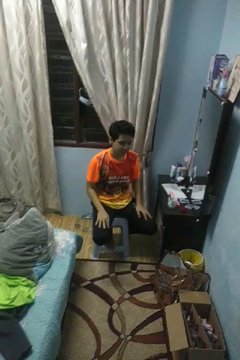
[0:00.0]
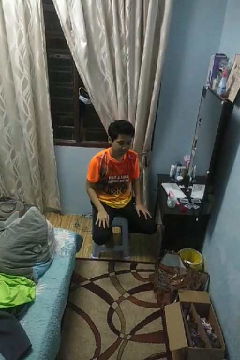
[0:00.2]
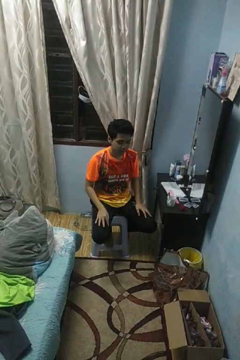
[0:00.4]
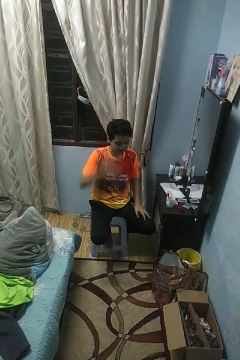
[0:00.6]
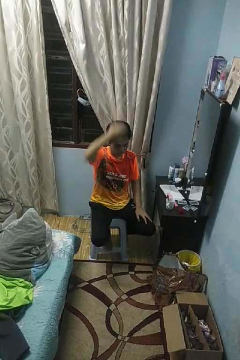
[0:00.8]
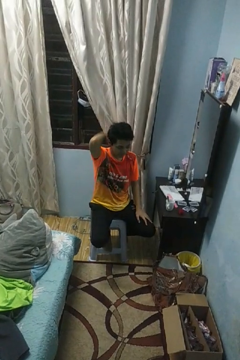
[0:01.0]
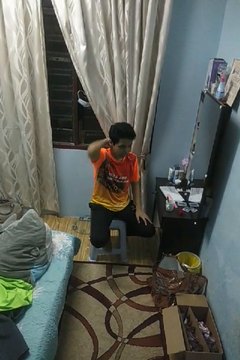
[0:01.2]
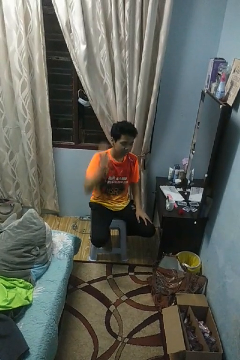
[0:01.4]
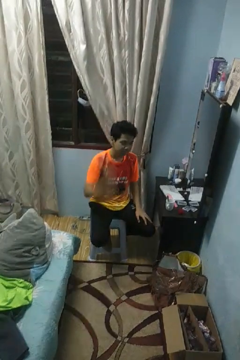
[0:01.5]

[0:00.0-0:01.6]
person strokes hair

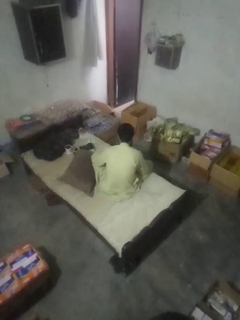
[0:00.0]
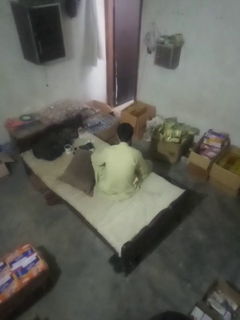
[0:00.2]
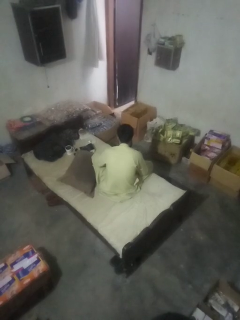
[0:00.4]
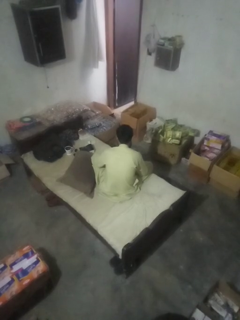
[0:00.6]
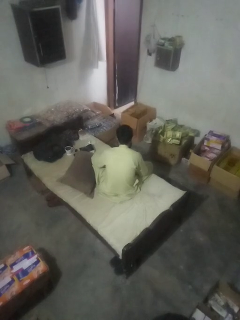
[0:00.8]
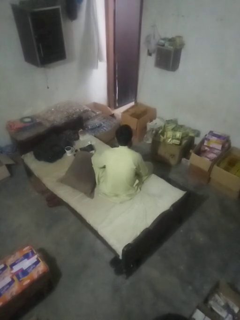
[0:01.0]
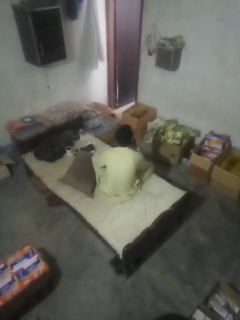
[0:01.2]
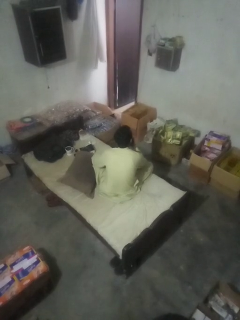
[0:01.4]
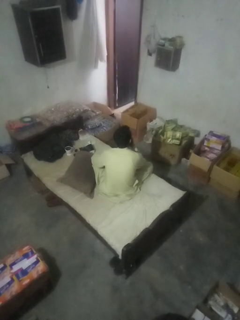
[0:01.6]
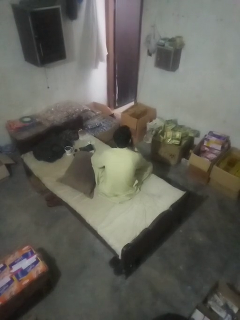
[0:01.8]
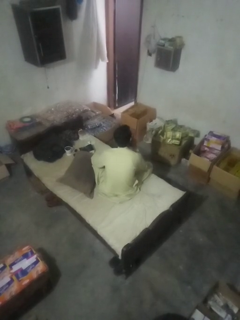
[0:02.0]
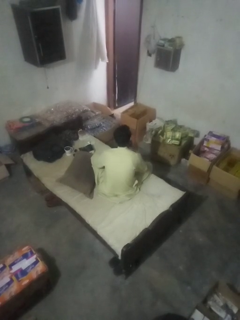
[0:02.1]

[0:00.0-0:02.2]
person gestures be quiet

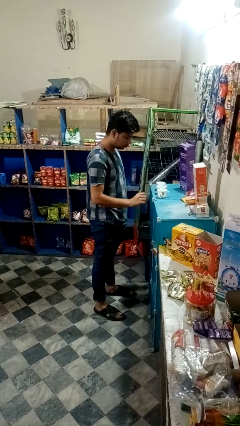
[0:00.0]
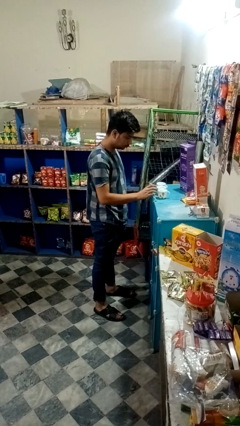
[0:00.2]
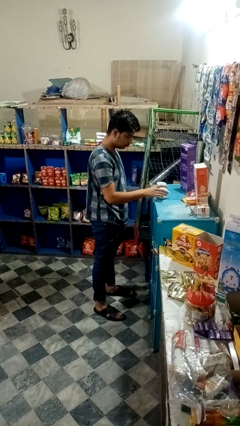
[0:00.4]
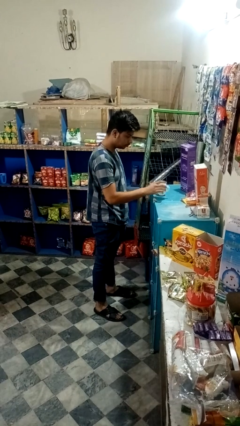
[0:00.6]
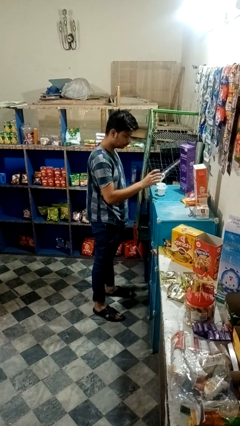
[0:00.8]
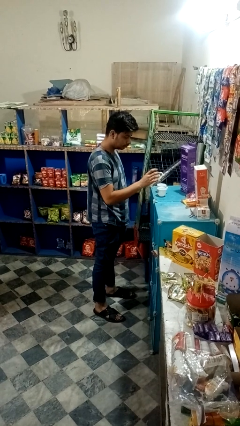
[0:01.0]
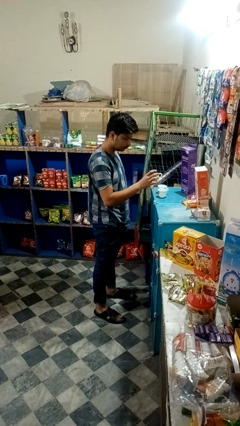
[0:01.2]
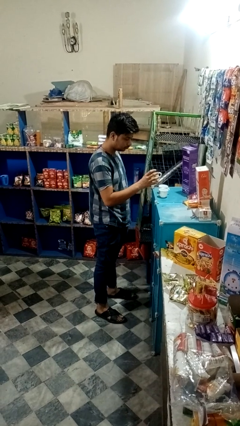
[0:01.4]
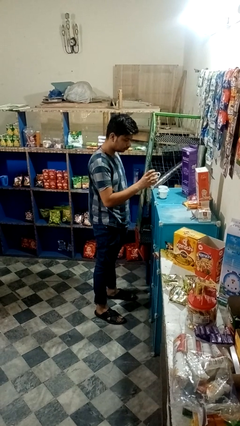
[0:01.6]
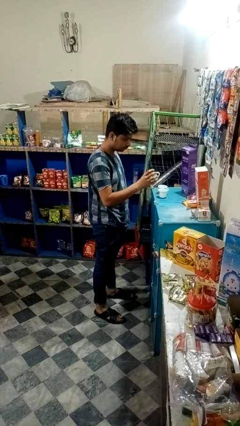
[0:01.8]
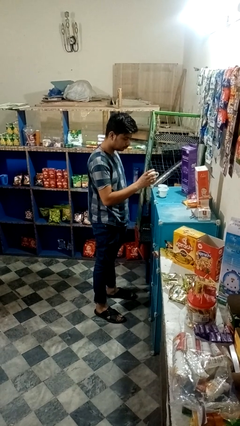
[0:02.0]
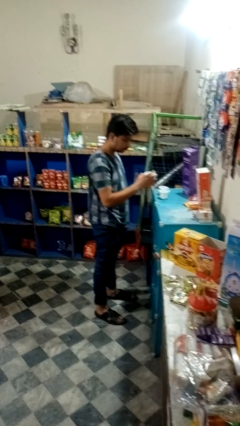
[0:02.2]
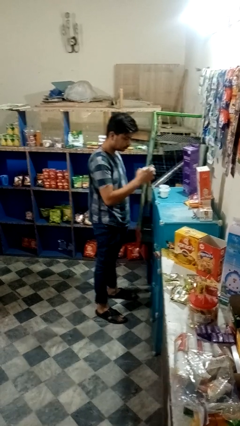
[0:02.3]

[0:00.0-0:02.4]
person picks up object from table

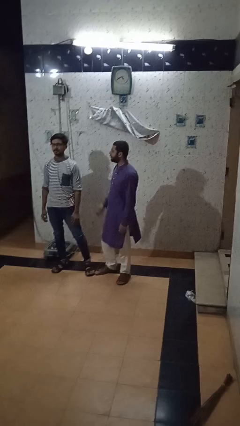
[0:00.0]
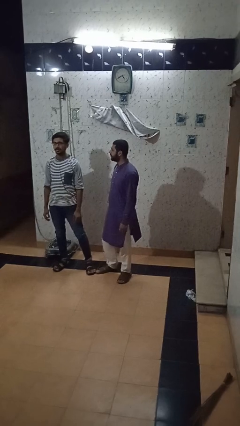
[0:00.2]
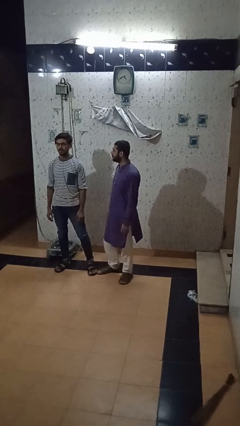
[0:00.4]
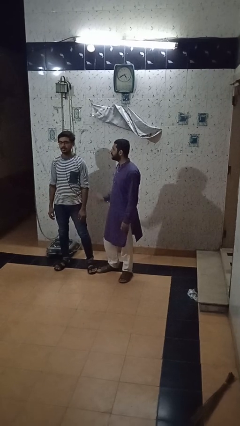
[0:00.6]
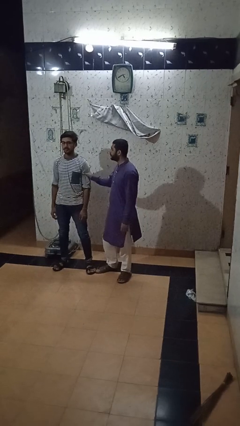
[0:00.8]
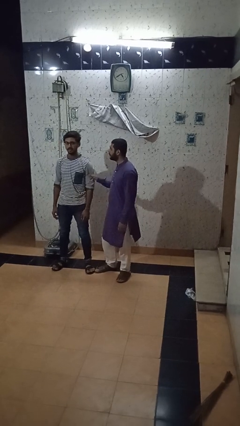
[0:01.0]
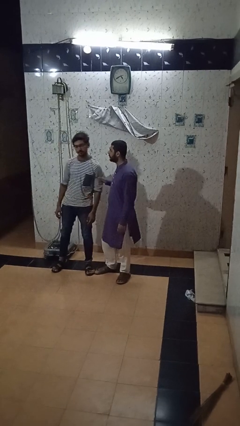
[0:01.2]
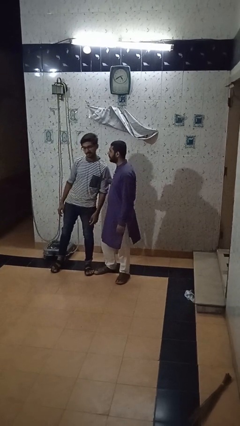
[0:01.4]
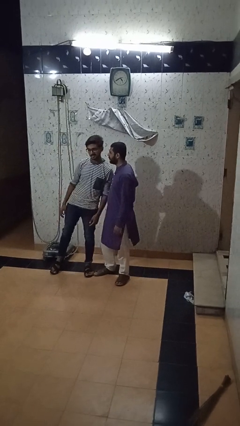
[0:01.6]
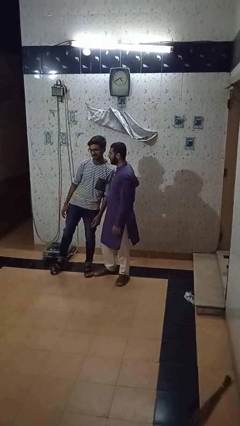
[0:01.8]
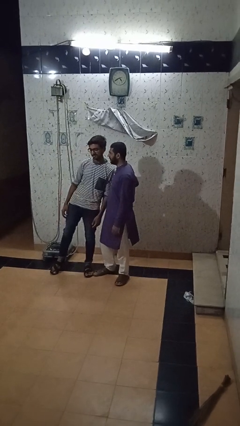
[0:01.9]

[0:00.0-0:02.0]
person grabs person by bicep

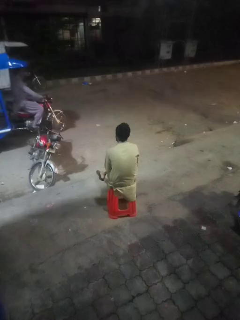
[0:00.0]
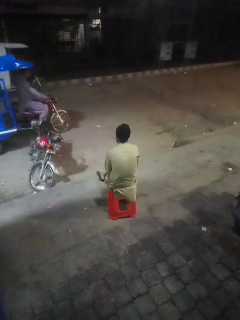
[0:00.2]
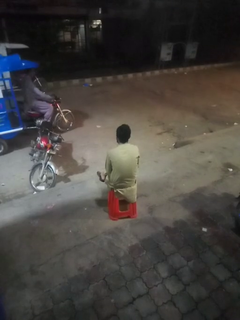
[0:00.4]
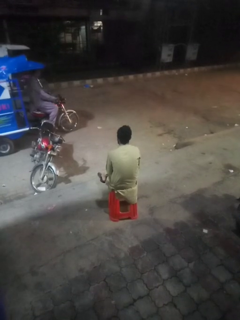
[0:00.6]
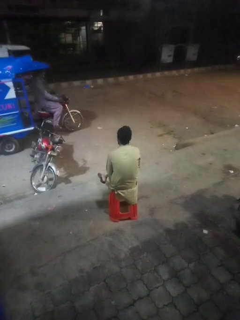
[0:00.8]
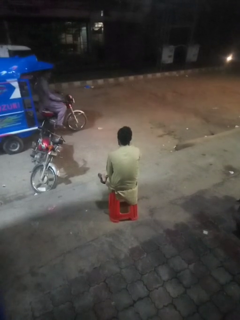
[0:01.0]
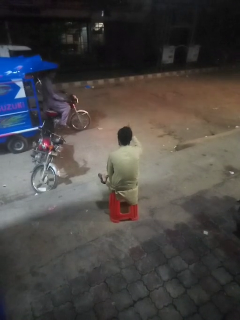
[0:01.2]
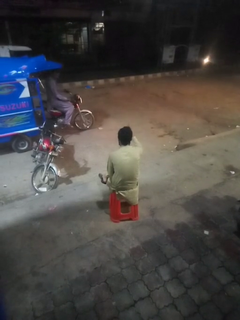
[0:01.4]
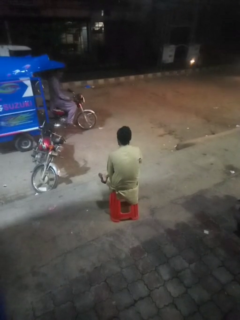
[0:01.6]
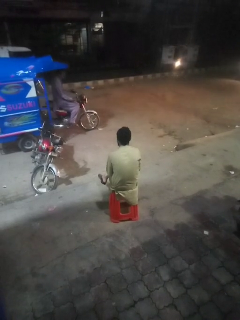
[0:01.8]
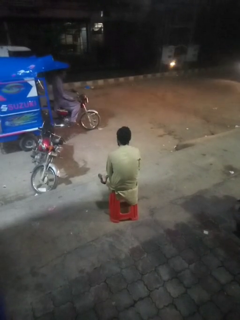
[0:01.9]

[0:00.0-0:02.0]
person gestures number one

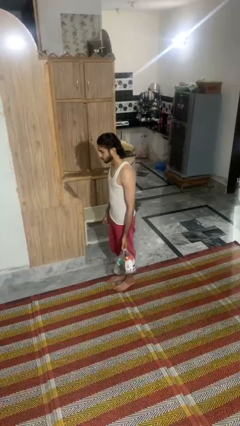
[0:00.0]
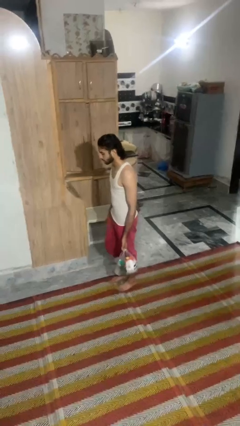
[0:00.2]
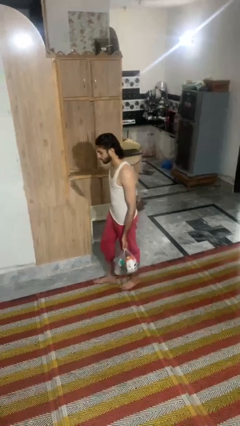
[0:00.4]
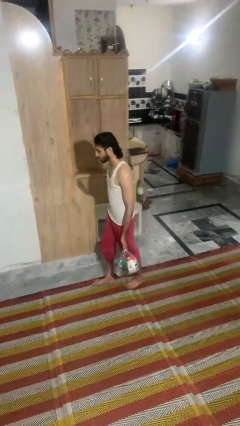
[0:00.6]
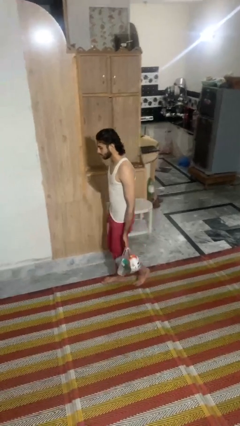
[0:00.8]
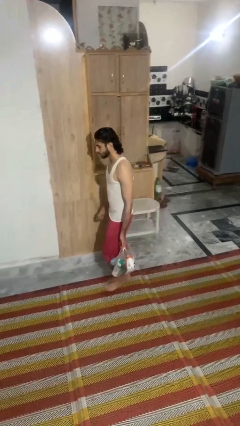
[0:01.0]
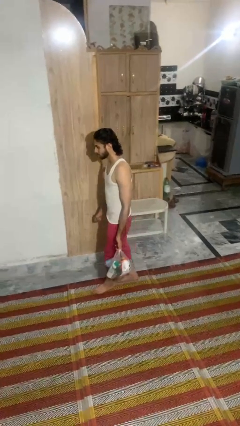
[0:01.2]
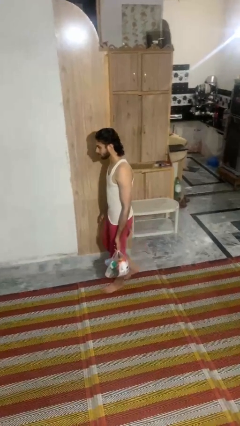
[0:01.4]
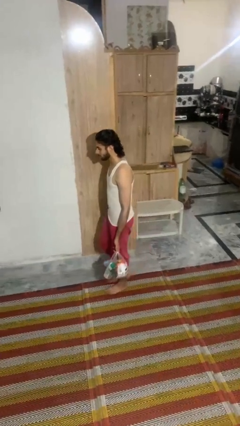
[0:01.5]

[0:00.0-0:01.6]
person carries groceries

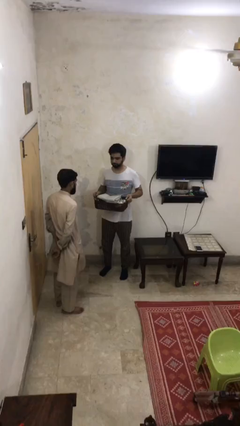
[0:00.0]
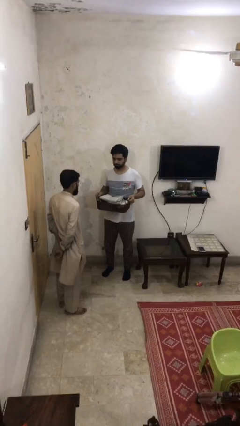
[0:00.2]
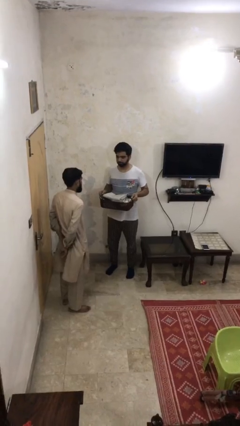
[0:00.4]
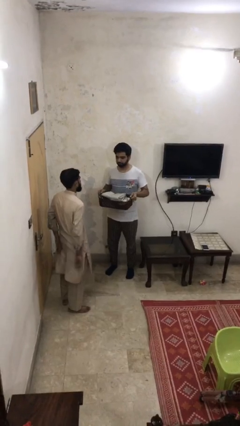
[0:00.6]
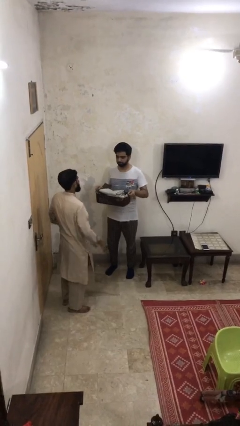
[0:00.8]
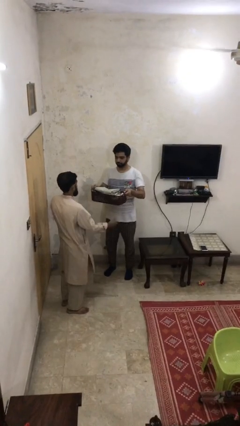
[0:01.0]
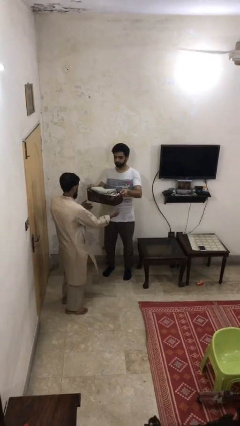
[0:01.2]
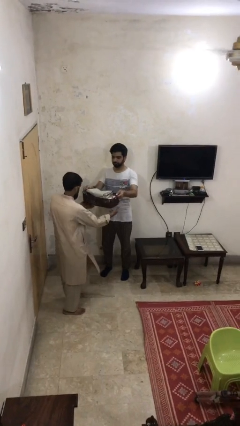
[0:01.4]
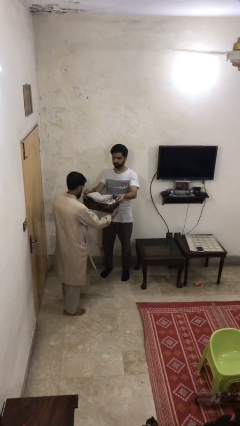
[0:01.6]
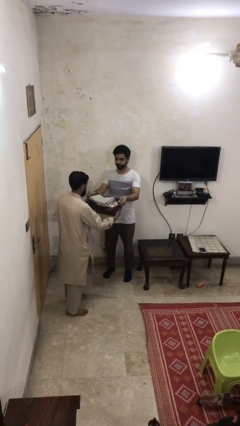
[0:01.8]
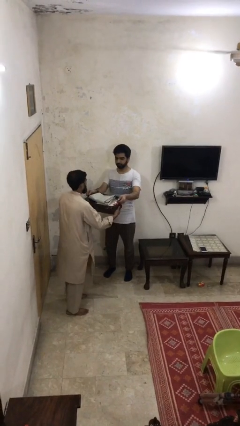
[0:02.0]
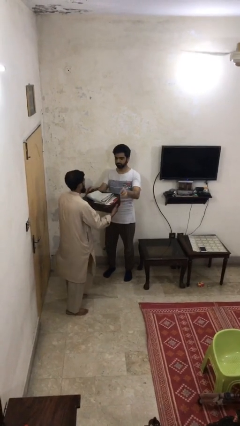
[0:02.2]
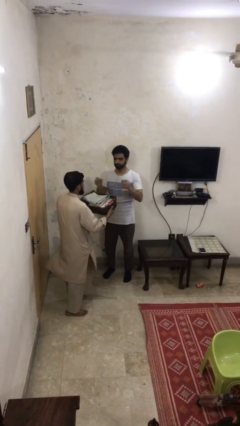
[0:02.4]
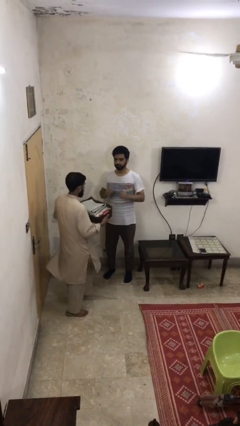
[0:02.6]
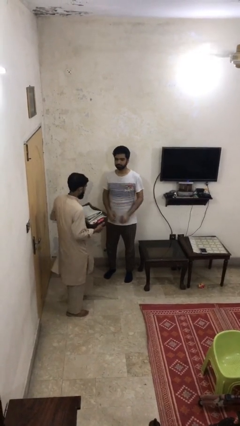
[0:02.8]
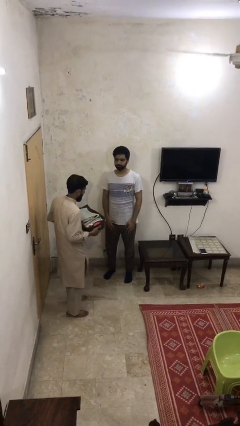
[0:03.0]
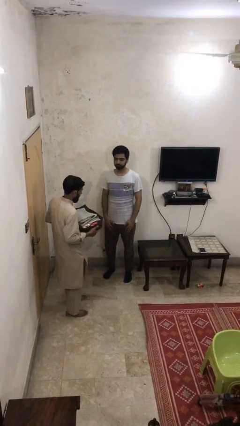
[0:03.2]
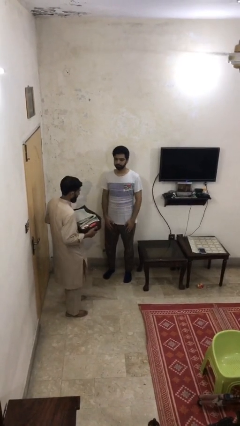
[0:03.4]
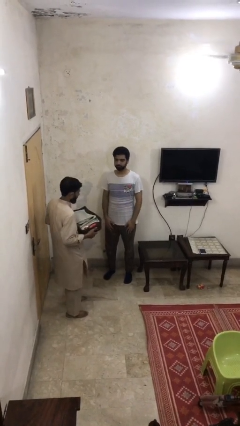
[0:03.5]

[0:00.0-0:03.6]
person transfers object to person

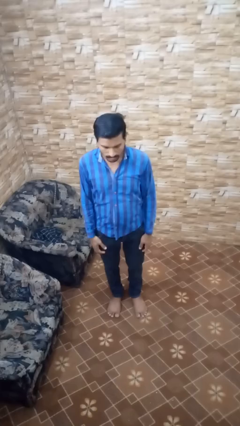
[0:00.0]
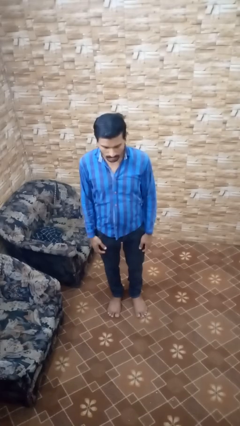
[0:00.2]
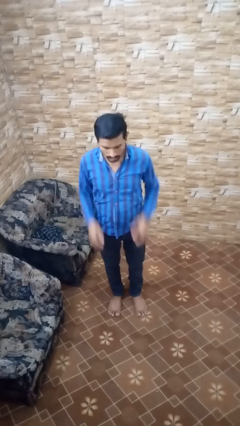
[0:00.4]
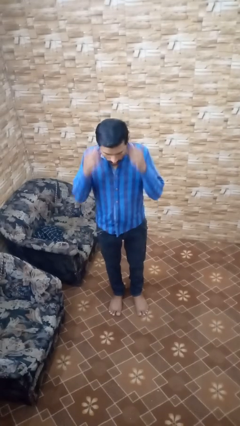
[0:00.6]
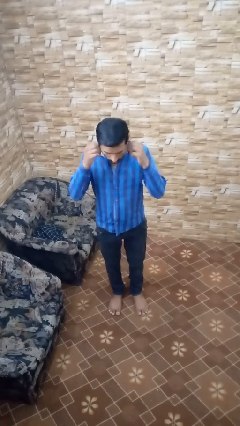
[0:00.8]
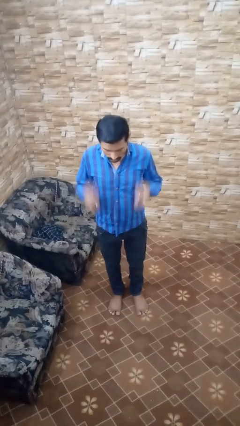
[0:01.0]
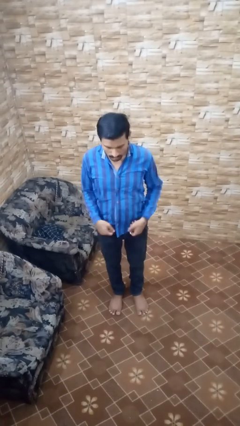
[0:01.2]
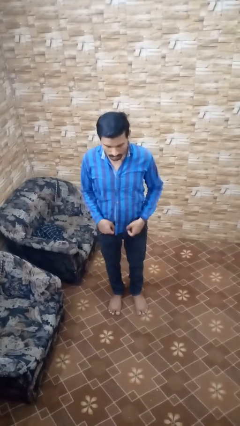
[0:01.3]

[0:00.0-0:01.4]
person takes off headphones

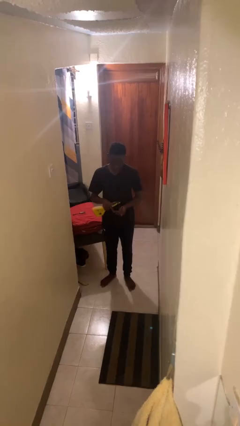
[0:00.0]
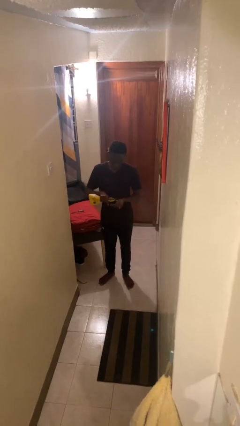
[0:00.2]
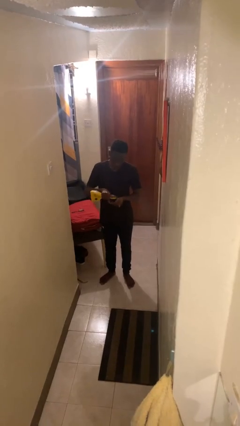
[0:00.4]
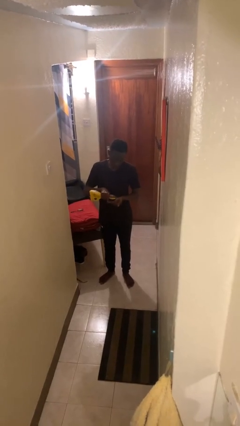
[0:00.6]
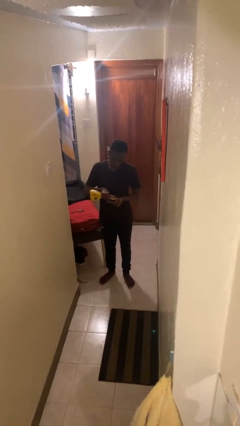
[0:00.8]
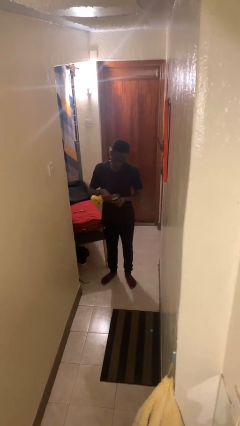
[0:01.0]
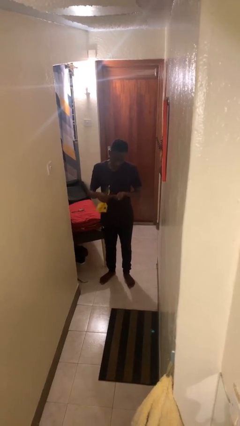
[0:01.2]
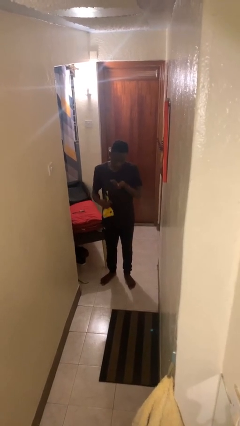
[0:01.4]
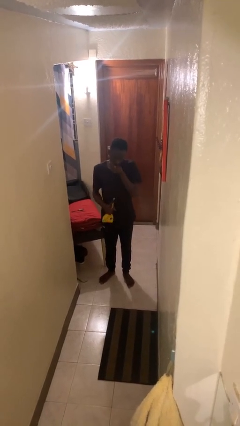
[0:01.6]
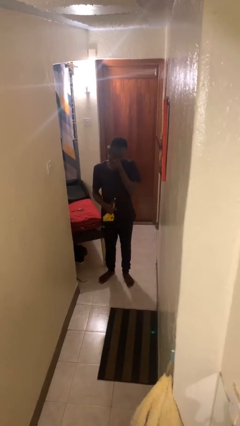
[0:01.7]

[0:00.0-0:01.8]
person eats snack from bag
